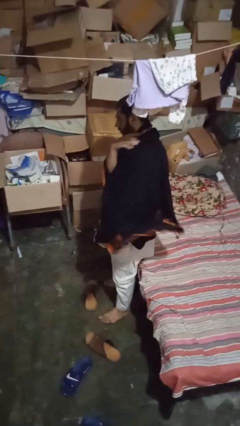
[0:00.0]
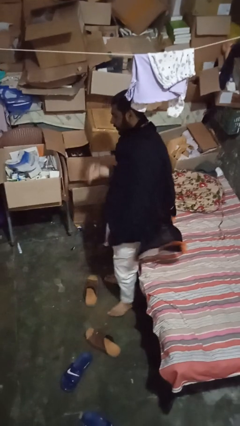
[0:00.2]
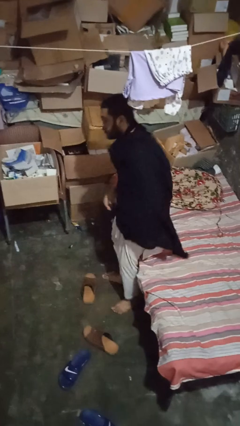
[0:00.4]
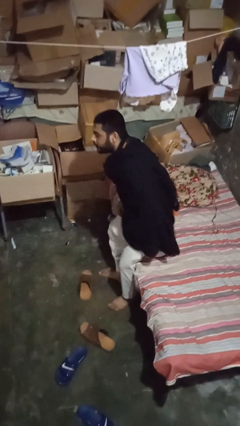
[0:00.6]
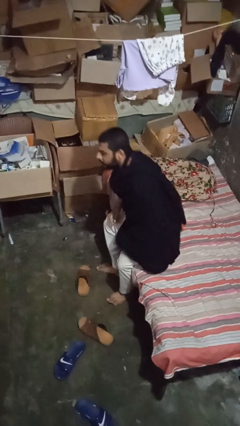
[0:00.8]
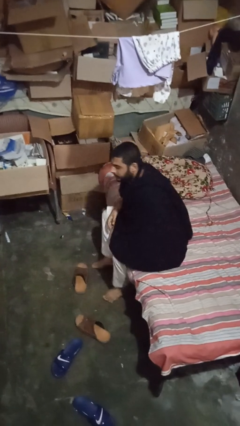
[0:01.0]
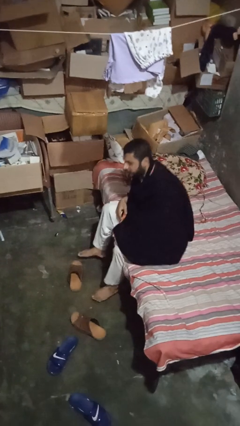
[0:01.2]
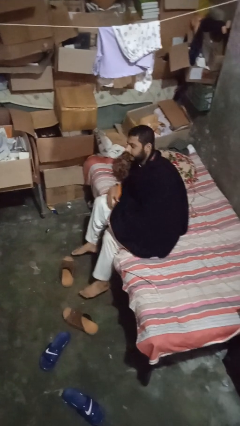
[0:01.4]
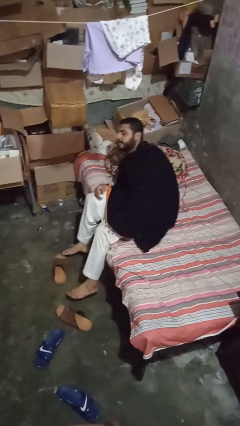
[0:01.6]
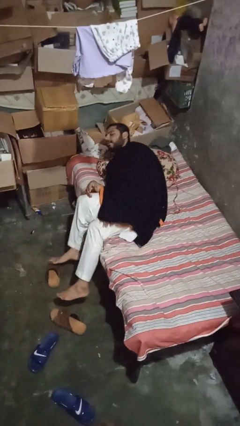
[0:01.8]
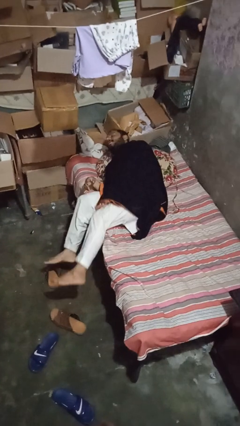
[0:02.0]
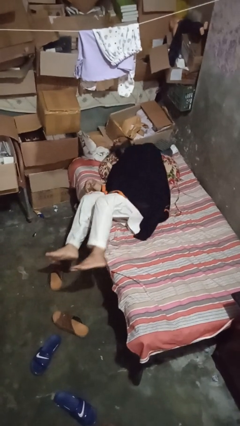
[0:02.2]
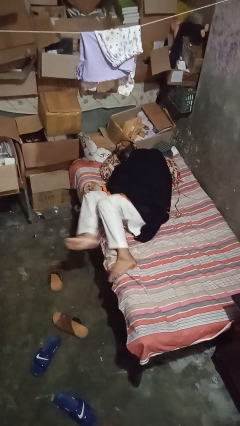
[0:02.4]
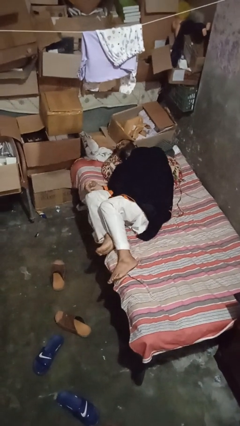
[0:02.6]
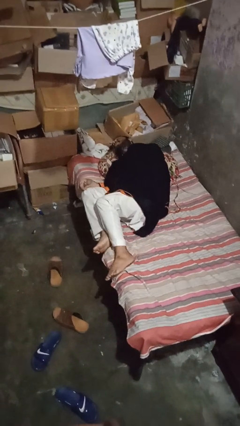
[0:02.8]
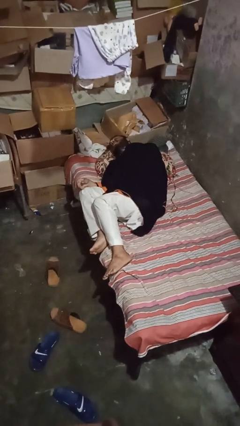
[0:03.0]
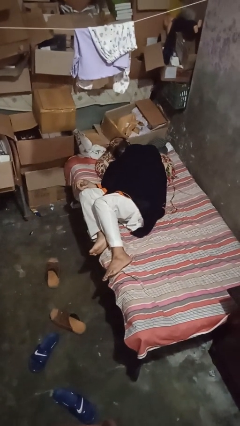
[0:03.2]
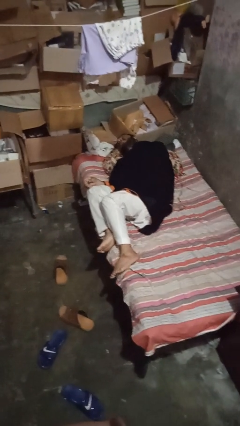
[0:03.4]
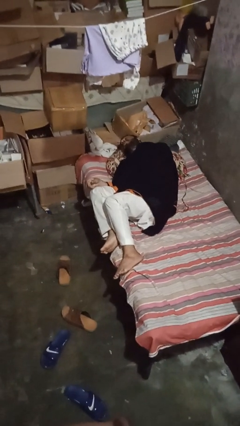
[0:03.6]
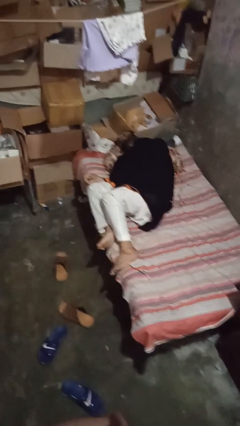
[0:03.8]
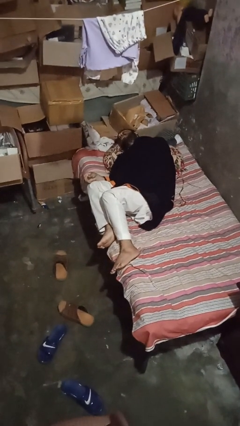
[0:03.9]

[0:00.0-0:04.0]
person lies down on bed

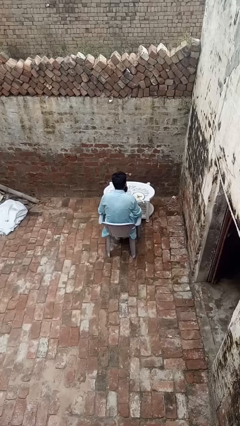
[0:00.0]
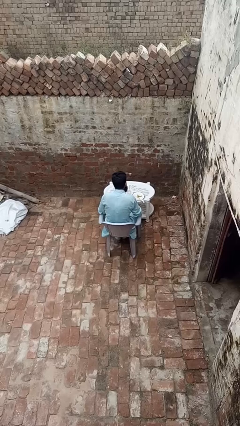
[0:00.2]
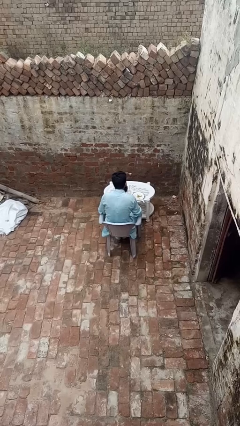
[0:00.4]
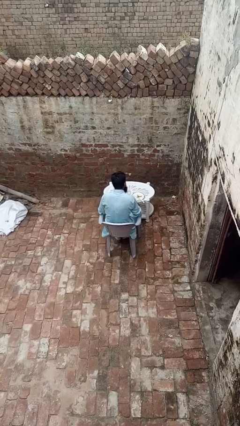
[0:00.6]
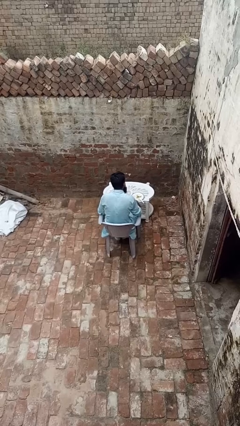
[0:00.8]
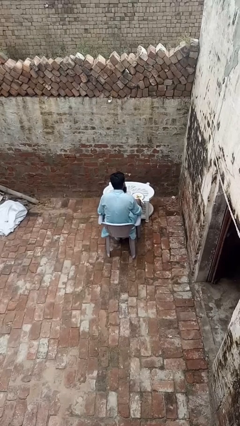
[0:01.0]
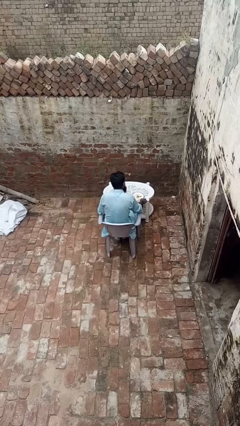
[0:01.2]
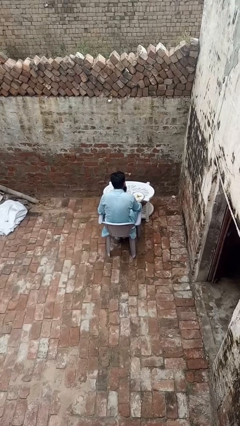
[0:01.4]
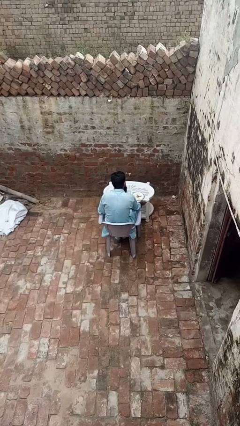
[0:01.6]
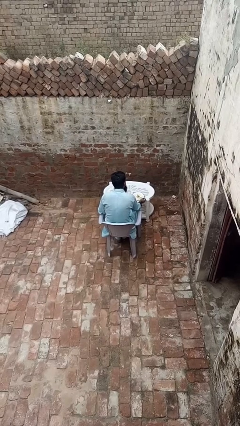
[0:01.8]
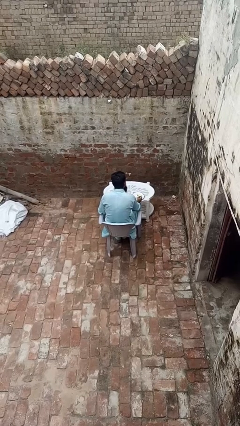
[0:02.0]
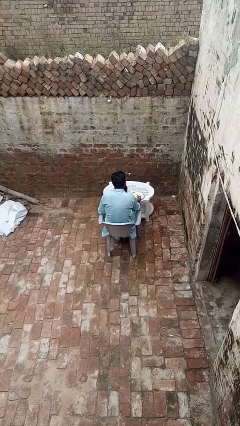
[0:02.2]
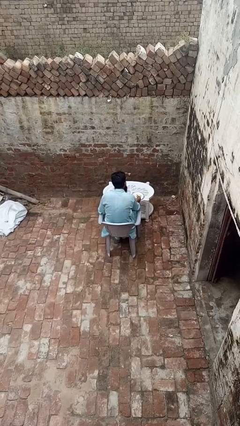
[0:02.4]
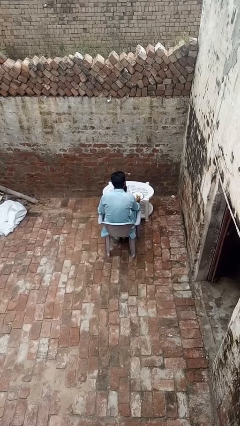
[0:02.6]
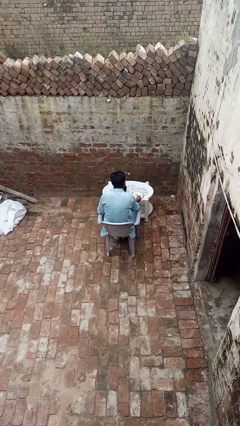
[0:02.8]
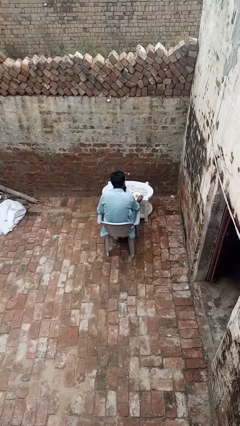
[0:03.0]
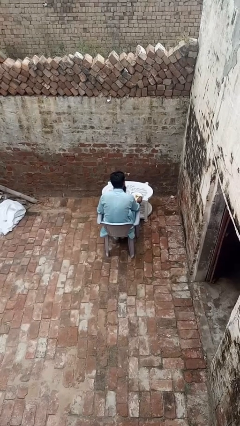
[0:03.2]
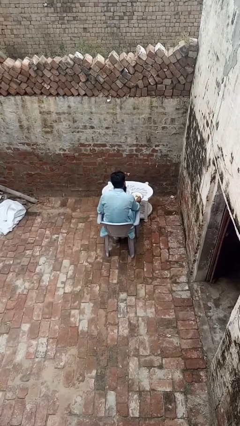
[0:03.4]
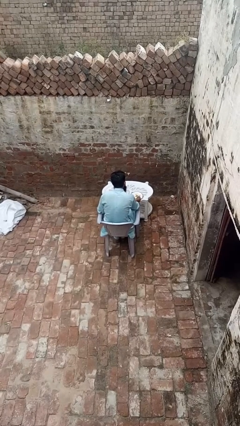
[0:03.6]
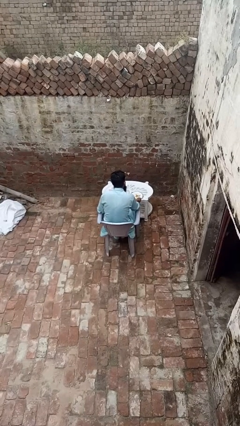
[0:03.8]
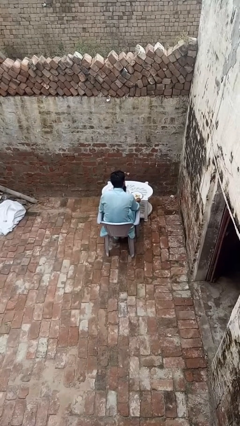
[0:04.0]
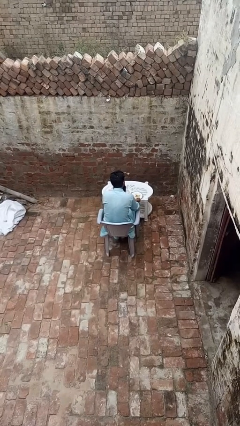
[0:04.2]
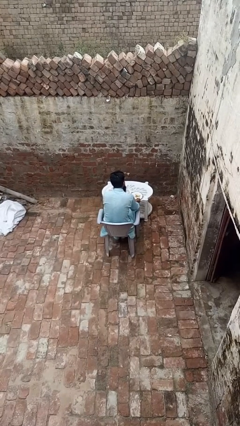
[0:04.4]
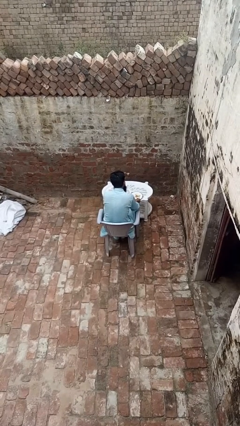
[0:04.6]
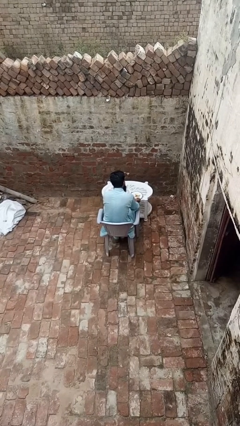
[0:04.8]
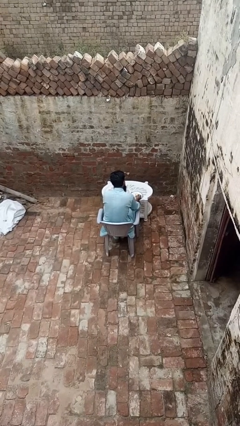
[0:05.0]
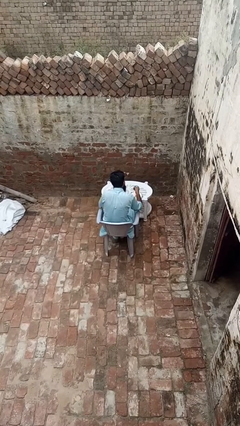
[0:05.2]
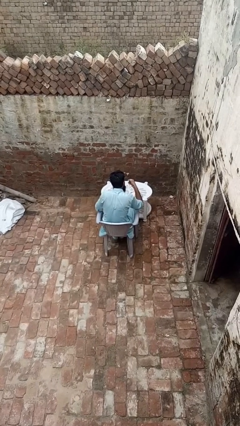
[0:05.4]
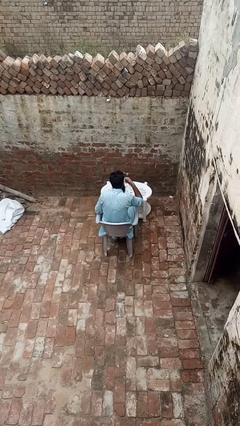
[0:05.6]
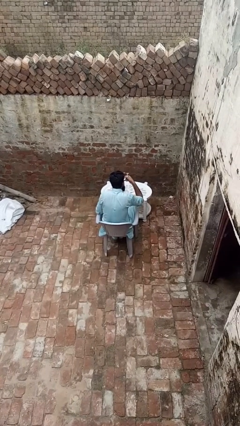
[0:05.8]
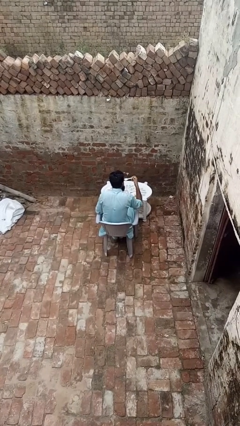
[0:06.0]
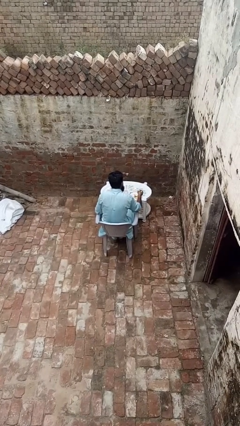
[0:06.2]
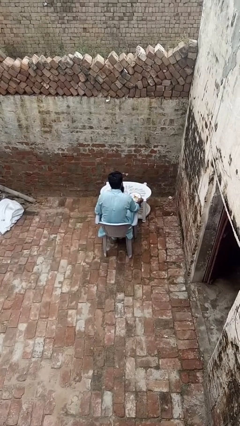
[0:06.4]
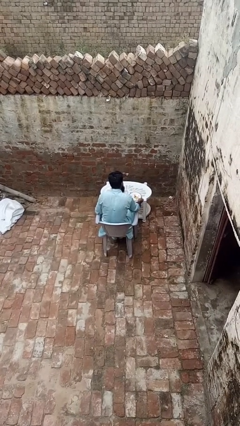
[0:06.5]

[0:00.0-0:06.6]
person eats with utensil

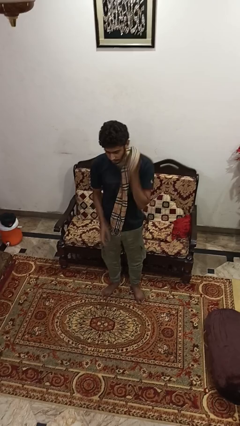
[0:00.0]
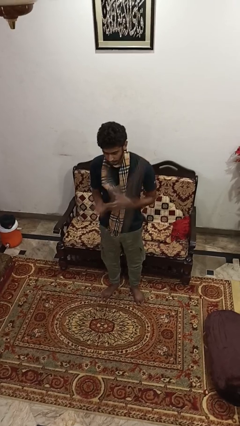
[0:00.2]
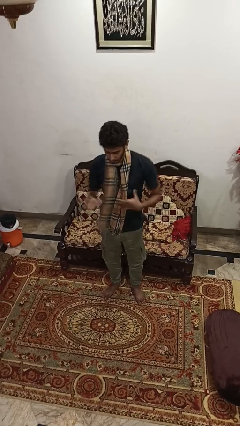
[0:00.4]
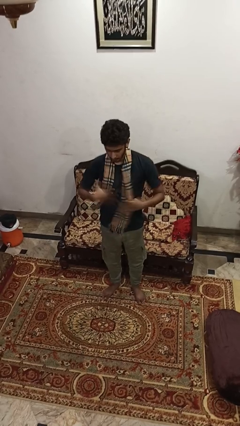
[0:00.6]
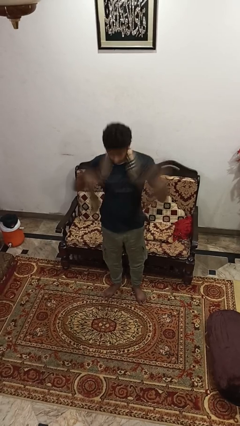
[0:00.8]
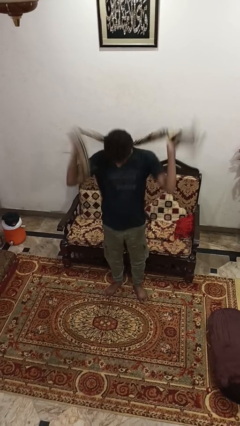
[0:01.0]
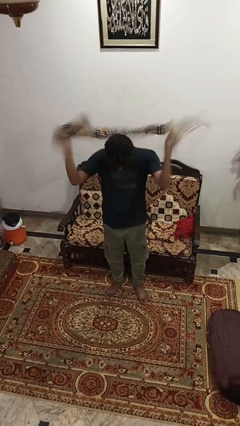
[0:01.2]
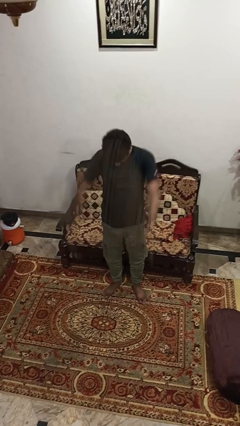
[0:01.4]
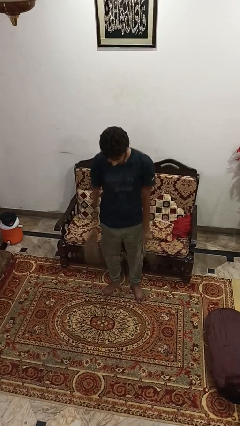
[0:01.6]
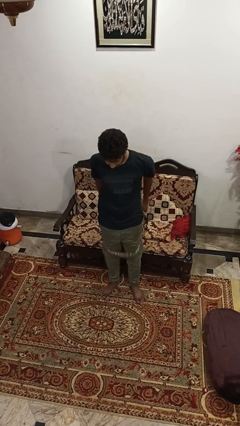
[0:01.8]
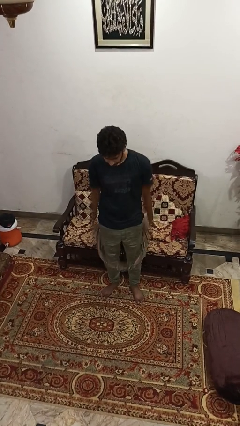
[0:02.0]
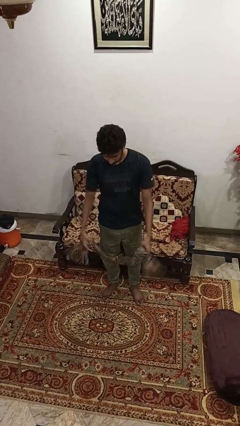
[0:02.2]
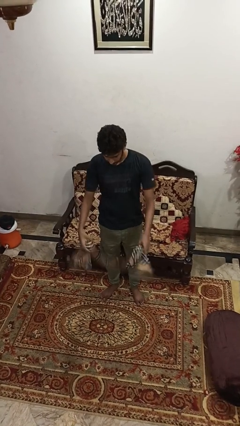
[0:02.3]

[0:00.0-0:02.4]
person takes off scarf

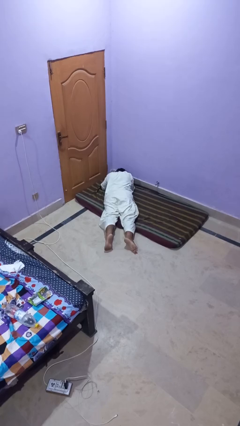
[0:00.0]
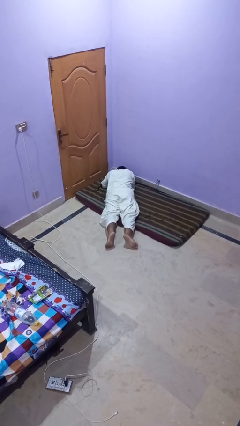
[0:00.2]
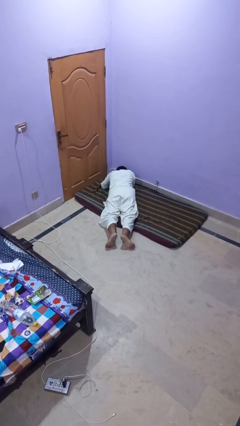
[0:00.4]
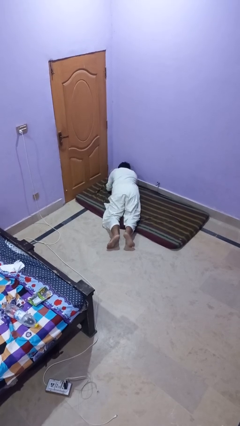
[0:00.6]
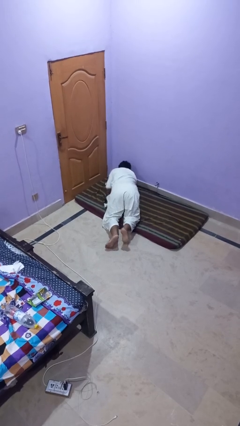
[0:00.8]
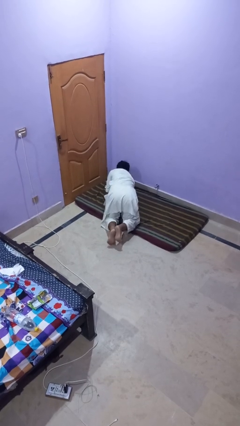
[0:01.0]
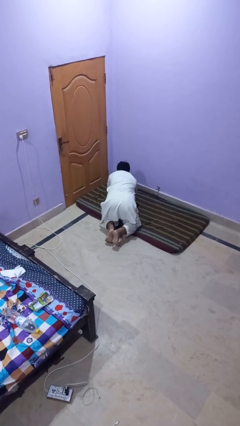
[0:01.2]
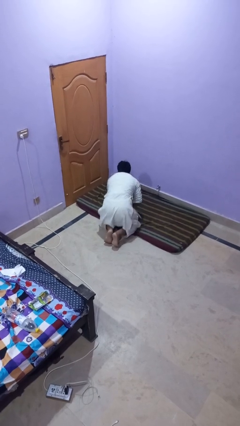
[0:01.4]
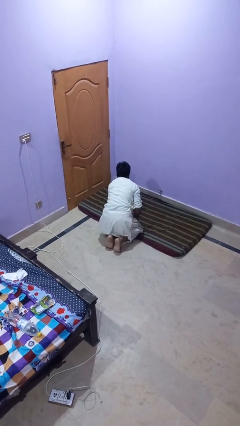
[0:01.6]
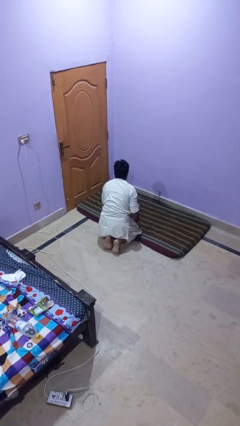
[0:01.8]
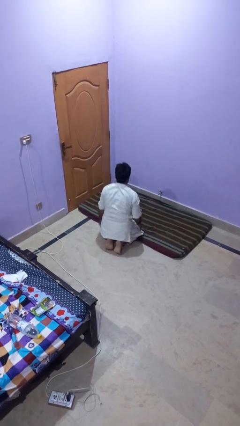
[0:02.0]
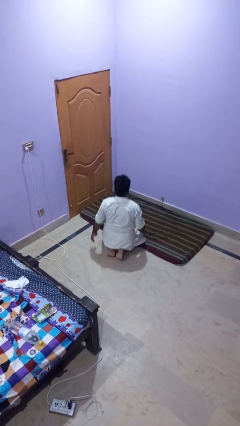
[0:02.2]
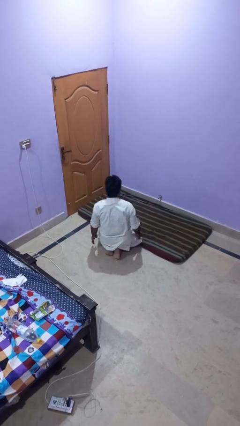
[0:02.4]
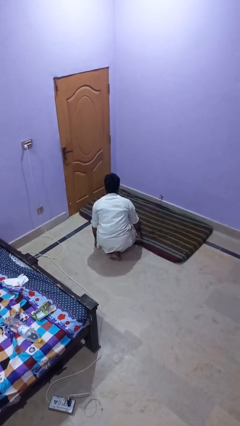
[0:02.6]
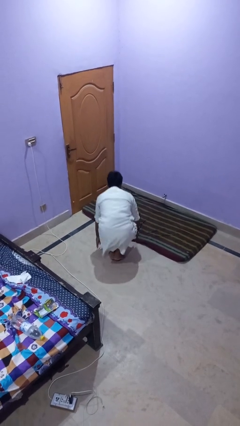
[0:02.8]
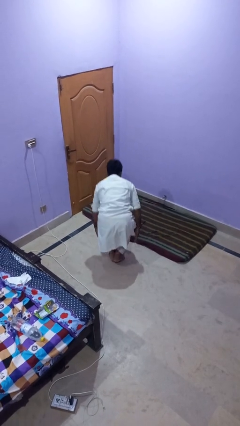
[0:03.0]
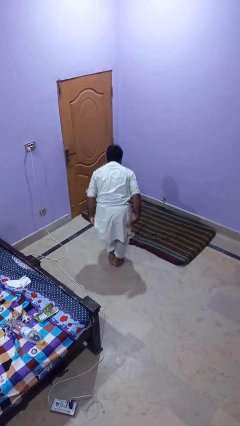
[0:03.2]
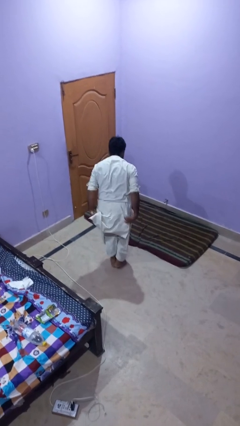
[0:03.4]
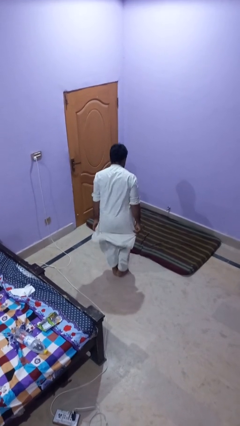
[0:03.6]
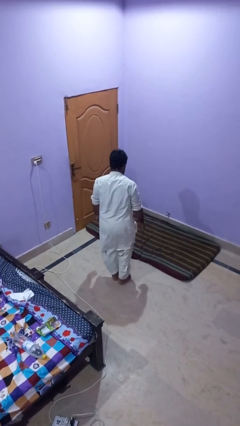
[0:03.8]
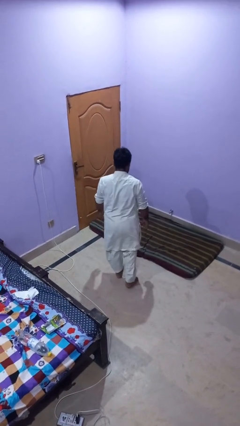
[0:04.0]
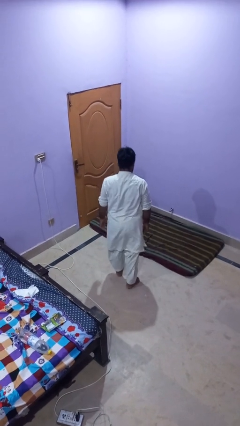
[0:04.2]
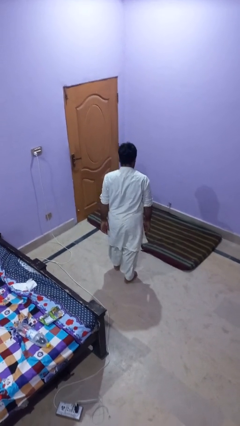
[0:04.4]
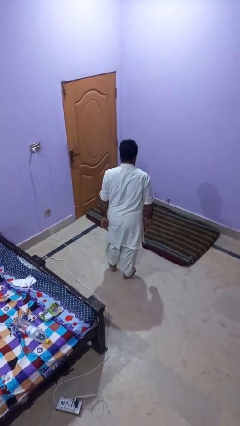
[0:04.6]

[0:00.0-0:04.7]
person stands up from floor
